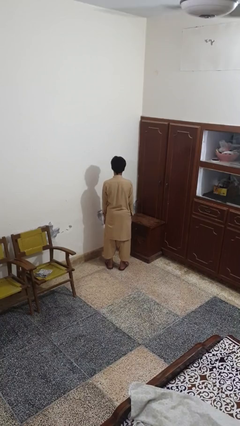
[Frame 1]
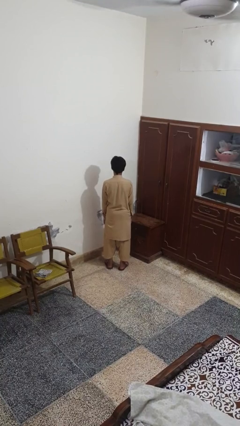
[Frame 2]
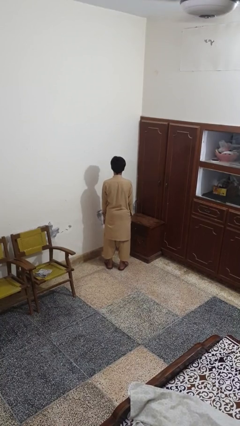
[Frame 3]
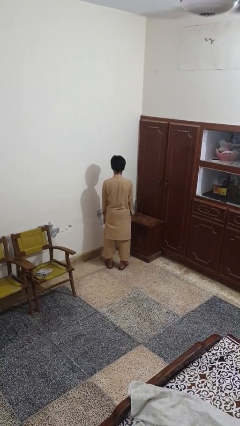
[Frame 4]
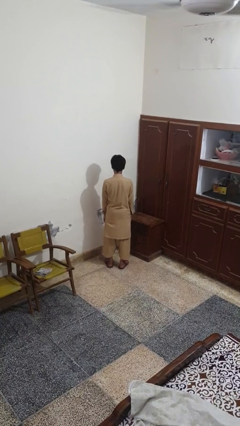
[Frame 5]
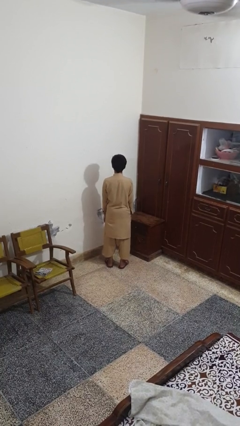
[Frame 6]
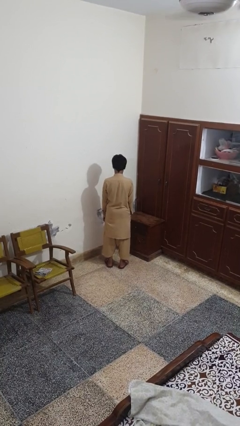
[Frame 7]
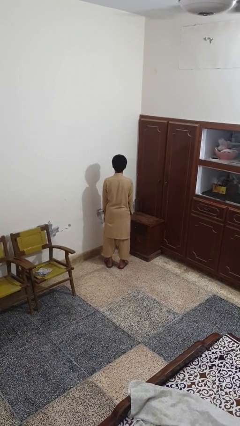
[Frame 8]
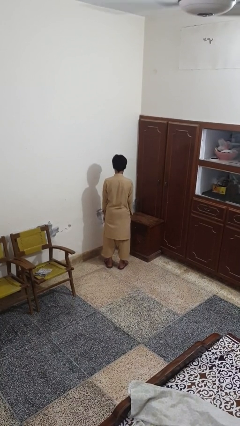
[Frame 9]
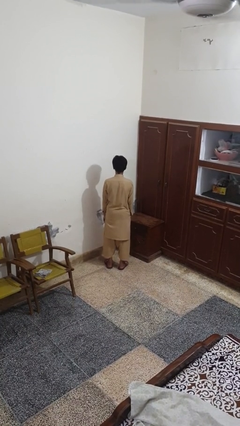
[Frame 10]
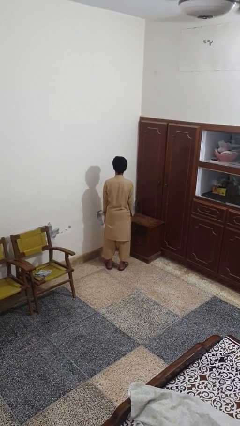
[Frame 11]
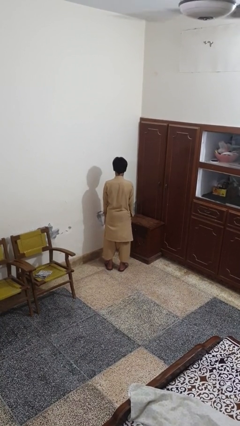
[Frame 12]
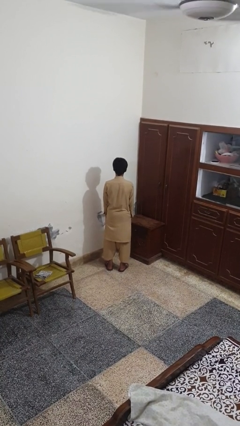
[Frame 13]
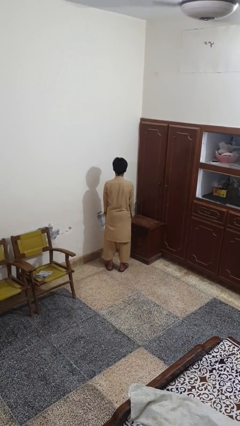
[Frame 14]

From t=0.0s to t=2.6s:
person nods head

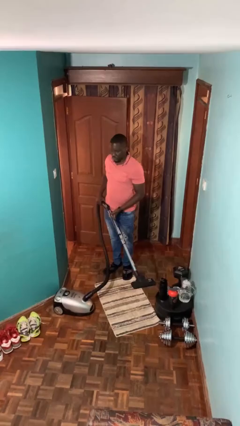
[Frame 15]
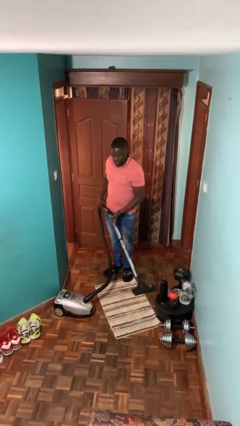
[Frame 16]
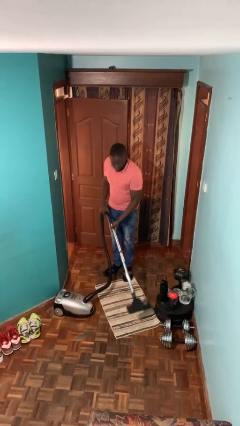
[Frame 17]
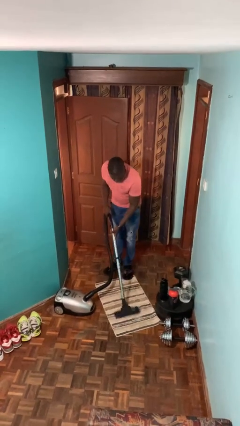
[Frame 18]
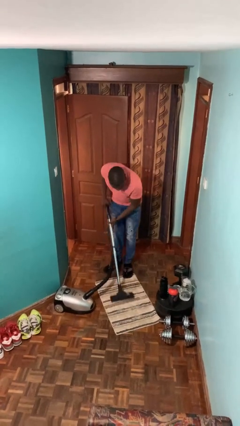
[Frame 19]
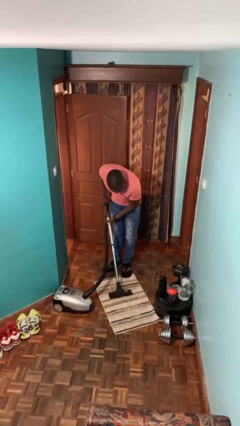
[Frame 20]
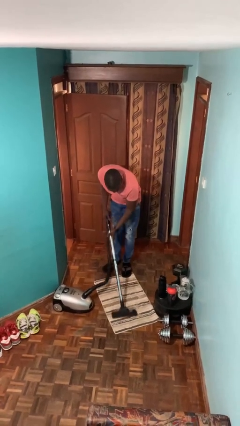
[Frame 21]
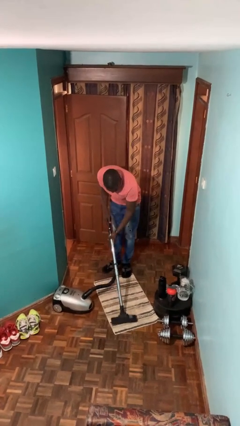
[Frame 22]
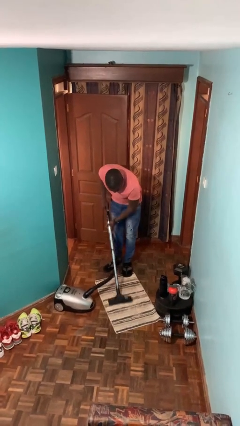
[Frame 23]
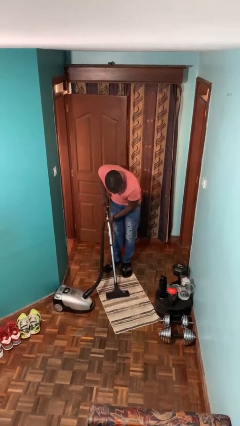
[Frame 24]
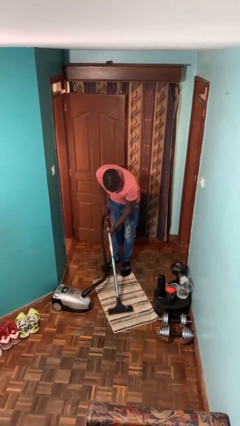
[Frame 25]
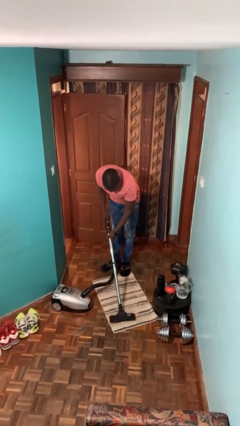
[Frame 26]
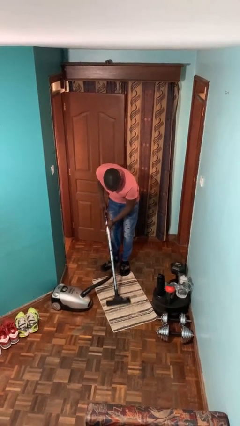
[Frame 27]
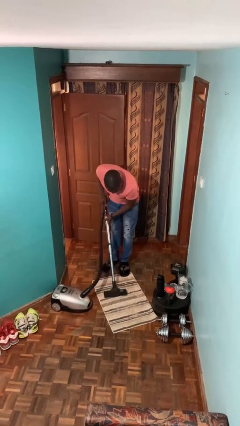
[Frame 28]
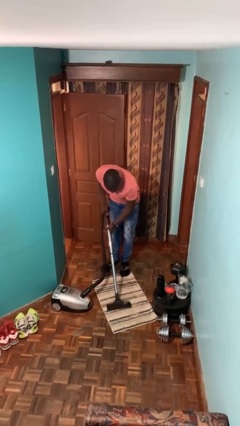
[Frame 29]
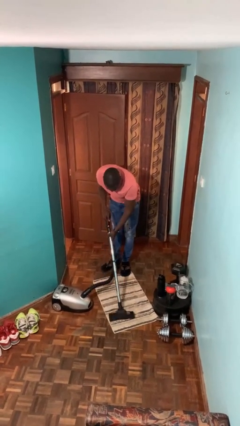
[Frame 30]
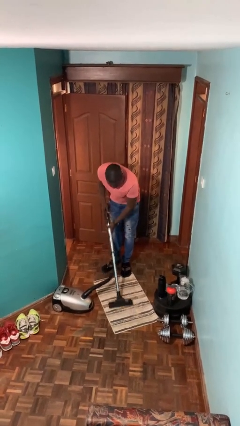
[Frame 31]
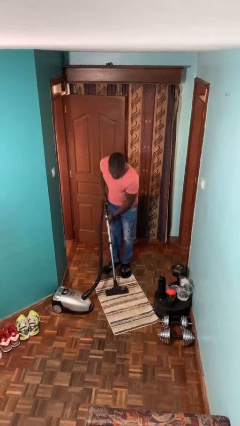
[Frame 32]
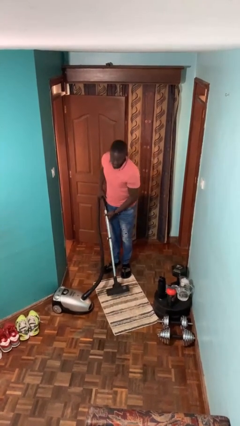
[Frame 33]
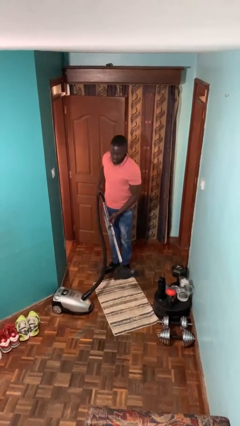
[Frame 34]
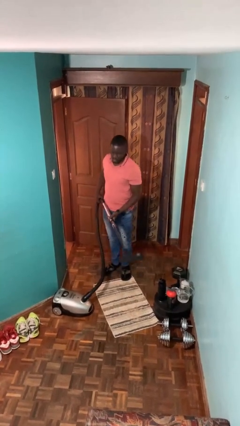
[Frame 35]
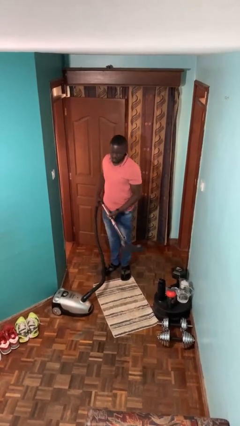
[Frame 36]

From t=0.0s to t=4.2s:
person vacuums carpet

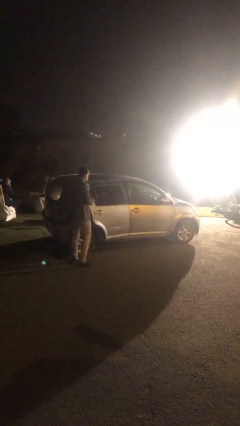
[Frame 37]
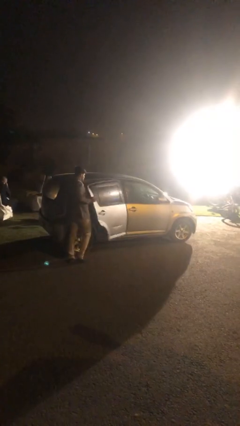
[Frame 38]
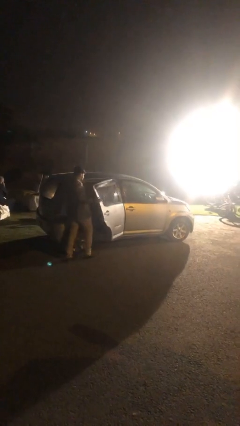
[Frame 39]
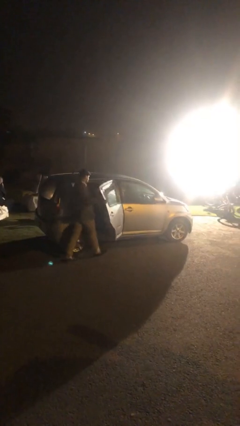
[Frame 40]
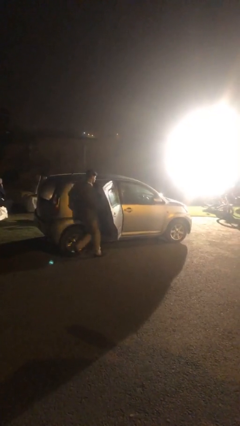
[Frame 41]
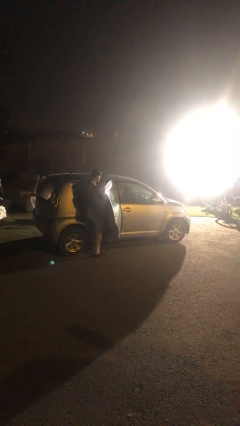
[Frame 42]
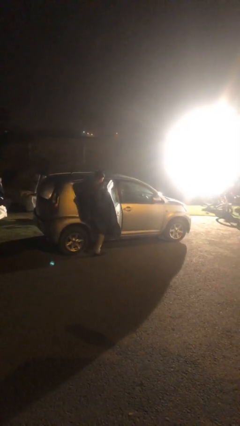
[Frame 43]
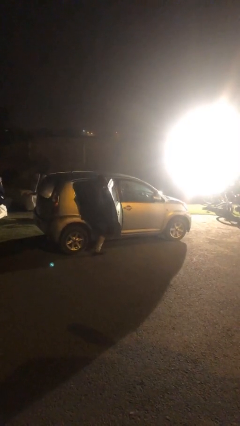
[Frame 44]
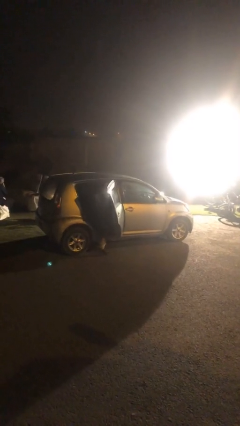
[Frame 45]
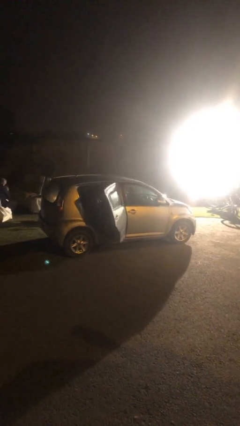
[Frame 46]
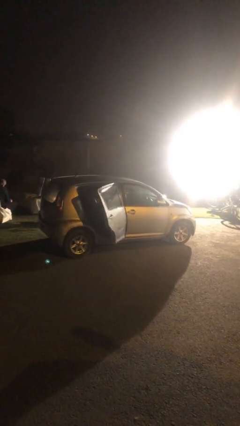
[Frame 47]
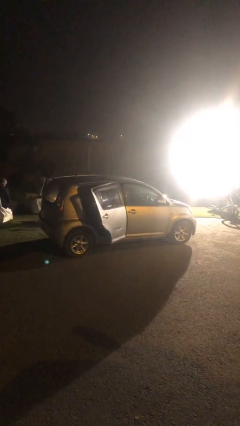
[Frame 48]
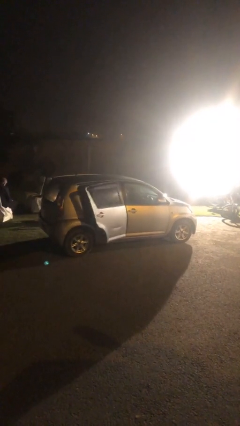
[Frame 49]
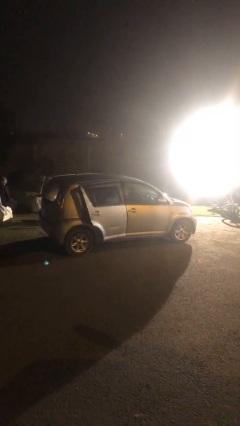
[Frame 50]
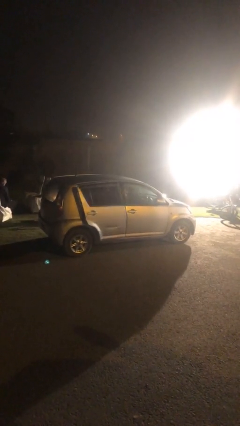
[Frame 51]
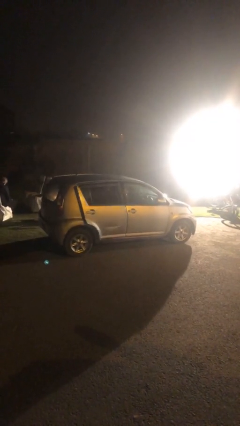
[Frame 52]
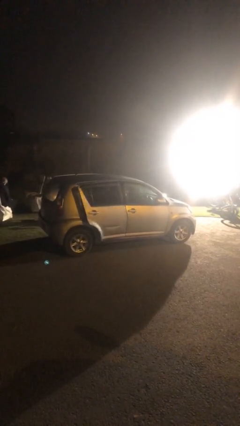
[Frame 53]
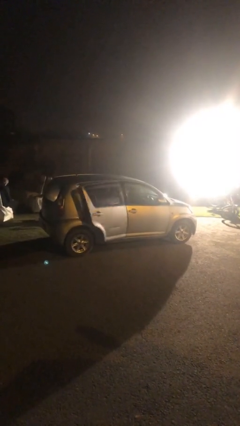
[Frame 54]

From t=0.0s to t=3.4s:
car picks up person

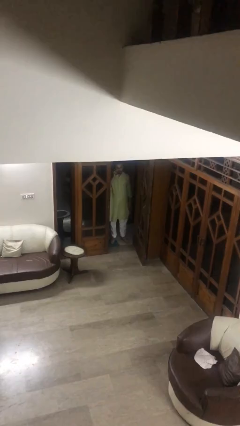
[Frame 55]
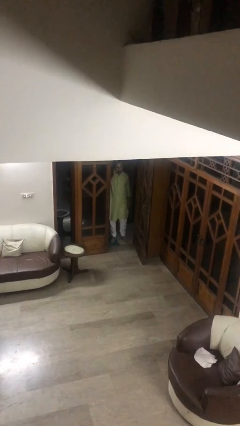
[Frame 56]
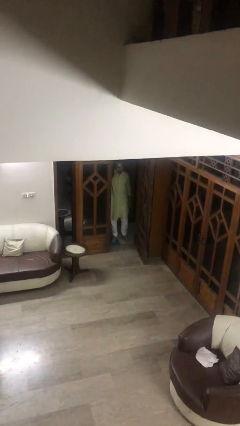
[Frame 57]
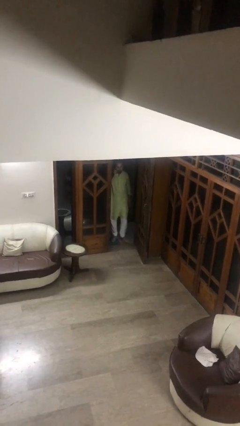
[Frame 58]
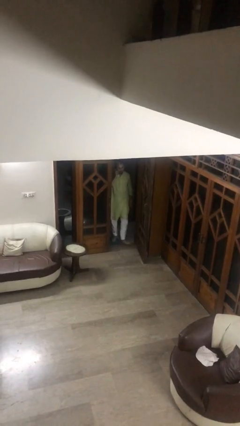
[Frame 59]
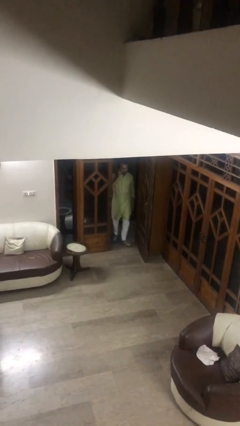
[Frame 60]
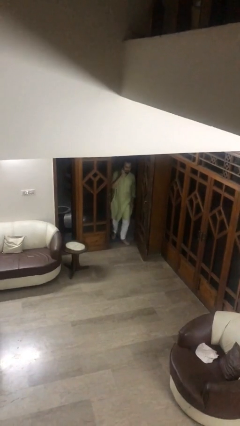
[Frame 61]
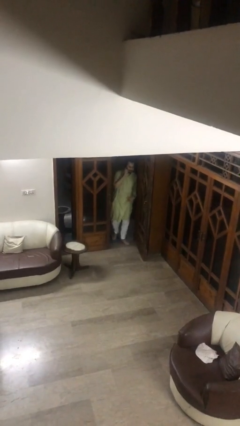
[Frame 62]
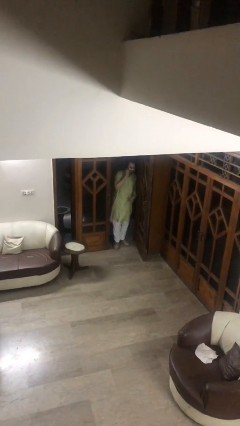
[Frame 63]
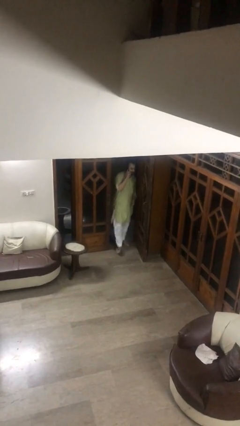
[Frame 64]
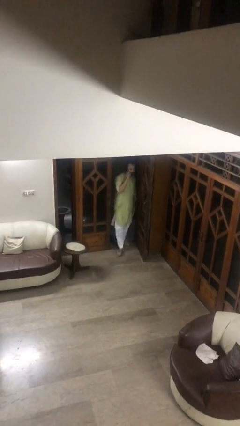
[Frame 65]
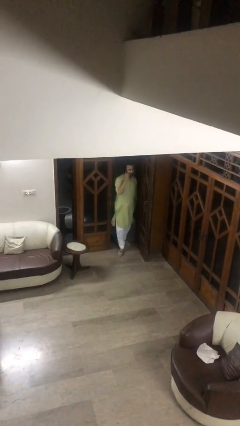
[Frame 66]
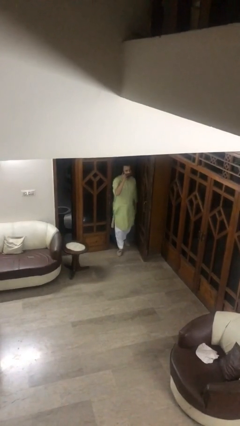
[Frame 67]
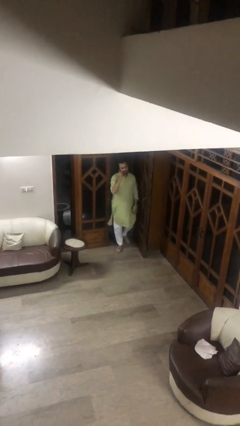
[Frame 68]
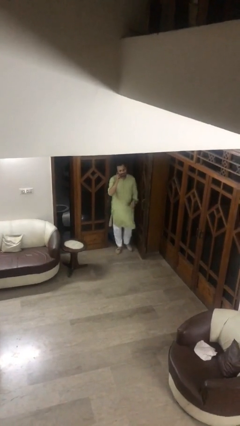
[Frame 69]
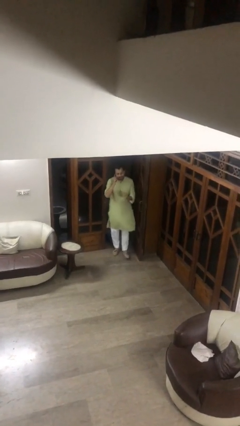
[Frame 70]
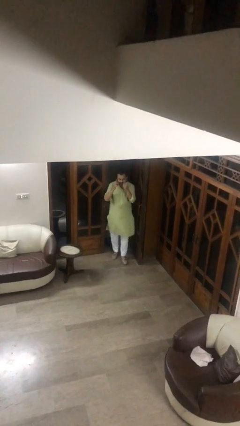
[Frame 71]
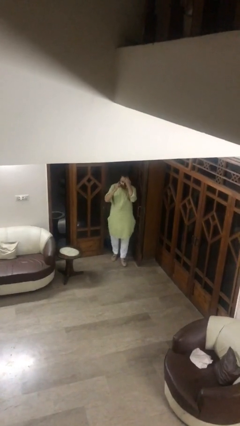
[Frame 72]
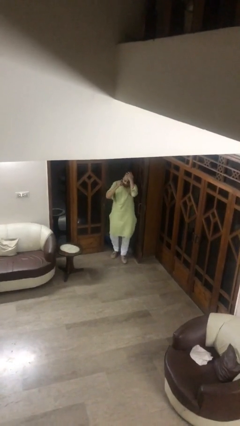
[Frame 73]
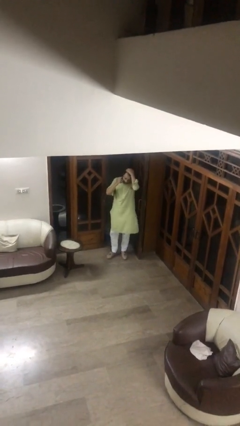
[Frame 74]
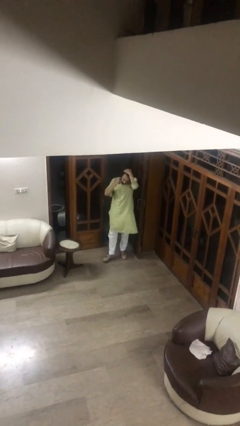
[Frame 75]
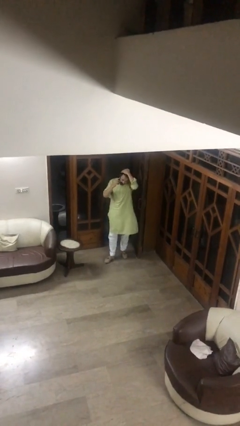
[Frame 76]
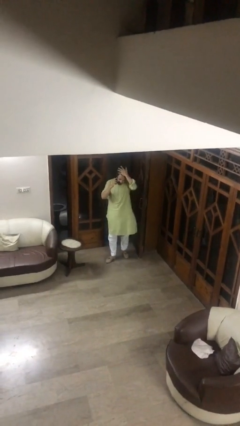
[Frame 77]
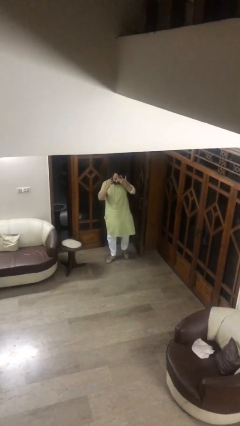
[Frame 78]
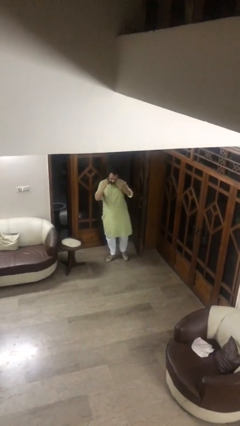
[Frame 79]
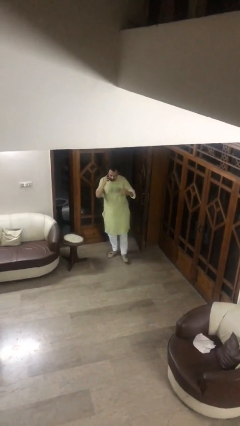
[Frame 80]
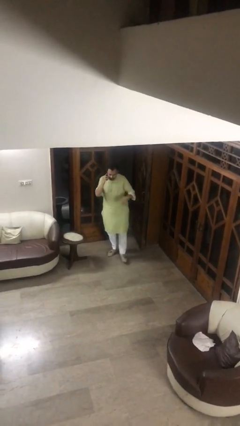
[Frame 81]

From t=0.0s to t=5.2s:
person enters scene through structure

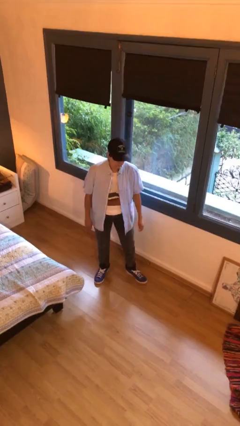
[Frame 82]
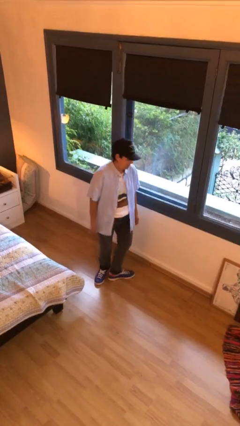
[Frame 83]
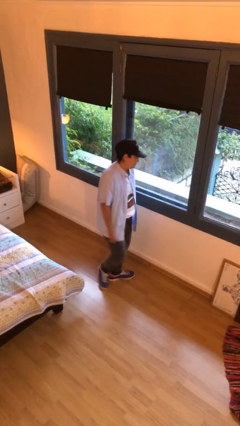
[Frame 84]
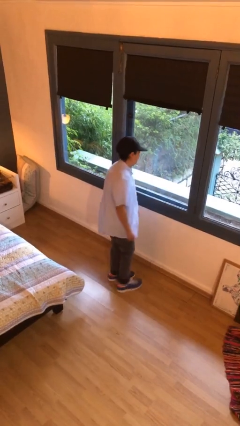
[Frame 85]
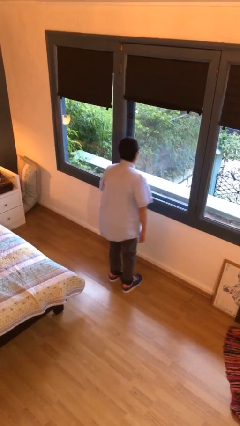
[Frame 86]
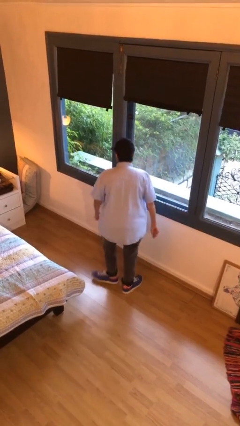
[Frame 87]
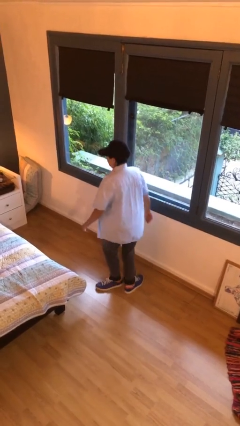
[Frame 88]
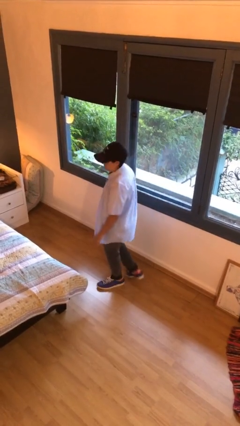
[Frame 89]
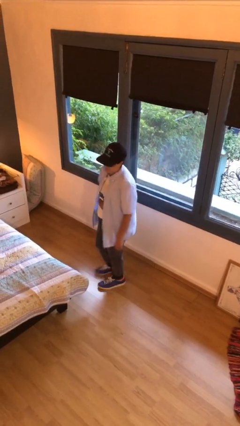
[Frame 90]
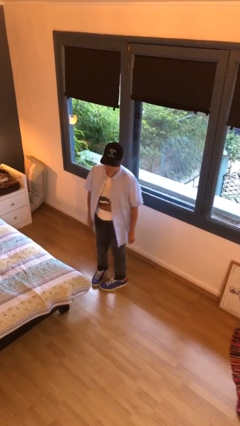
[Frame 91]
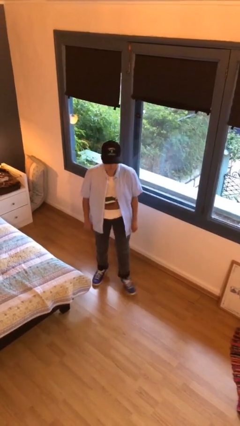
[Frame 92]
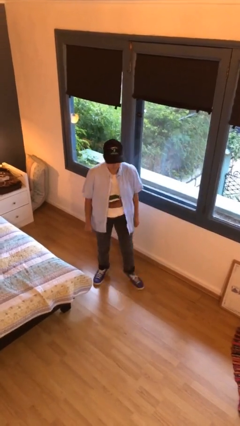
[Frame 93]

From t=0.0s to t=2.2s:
person twirls
